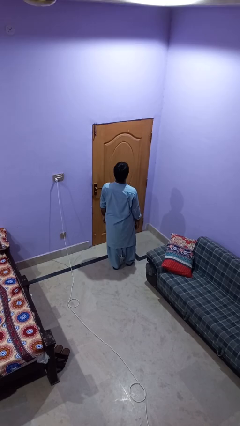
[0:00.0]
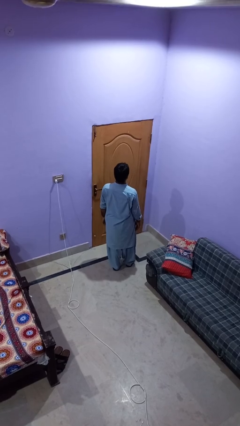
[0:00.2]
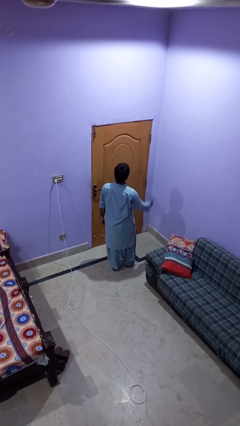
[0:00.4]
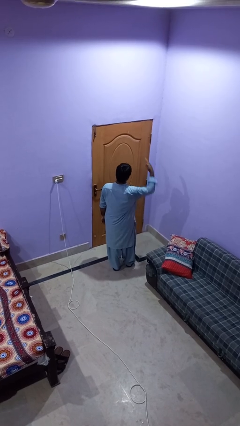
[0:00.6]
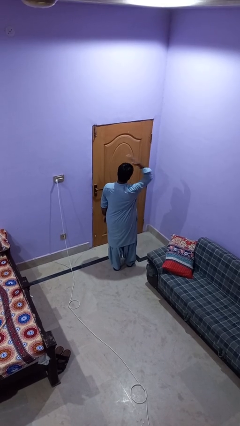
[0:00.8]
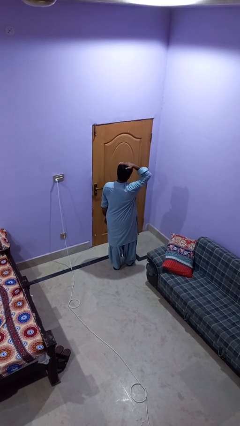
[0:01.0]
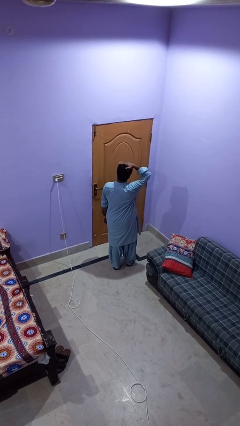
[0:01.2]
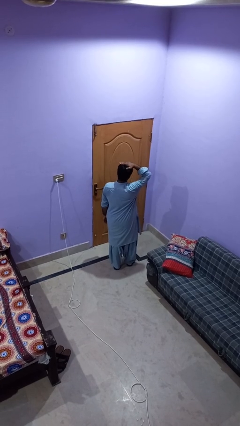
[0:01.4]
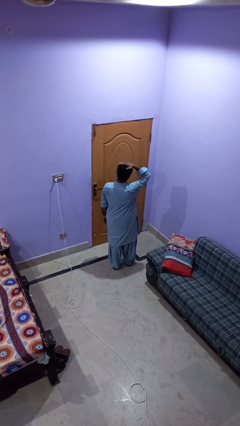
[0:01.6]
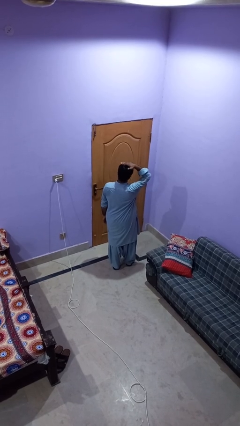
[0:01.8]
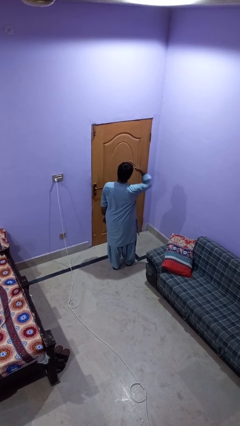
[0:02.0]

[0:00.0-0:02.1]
person pats head

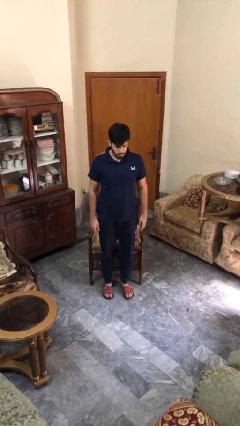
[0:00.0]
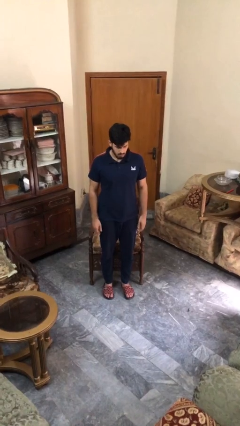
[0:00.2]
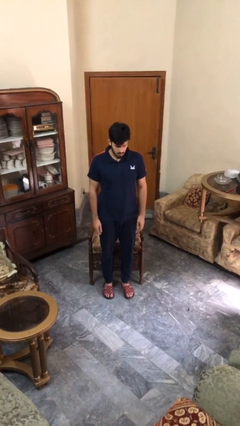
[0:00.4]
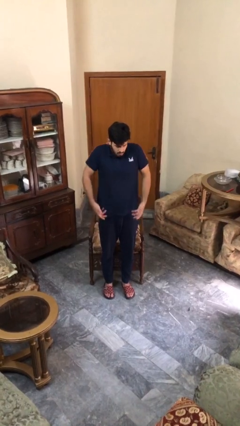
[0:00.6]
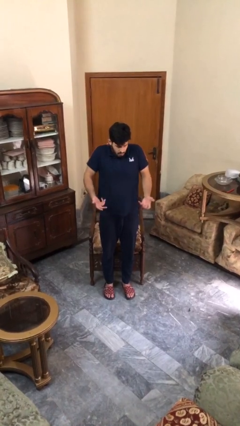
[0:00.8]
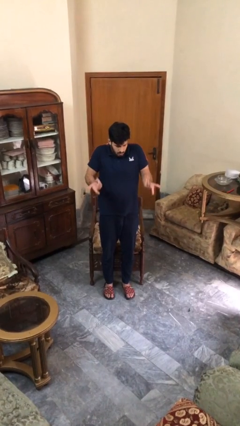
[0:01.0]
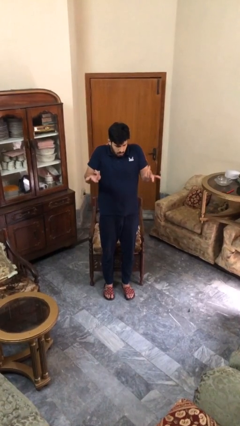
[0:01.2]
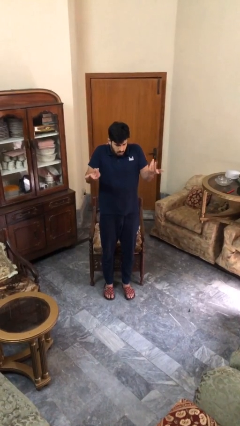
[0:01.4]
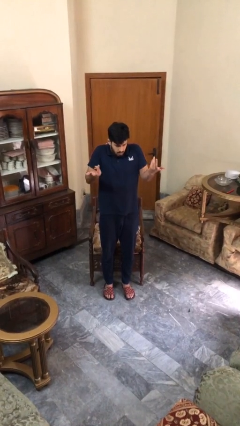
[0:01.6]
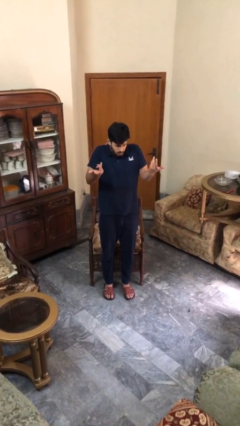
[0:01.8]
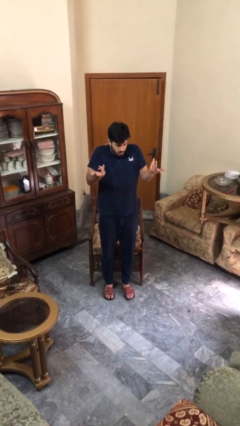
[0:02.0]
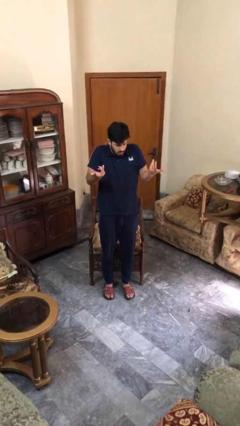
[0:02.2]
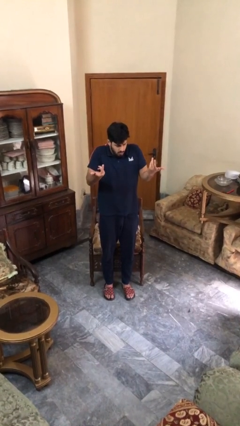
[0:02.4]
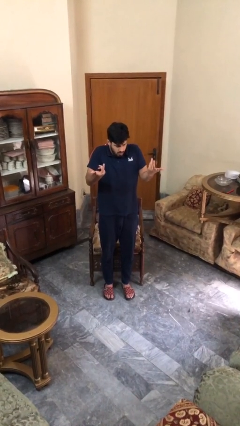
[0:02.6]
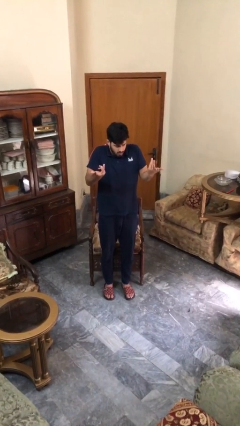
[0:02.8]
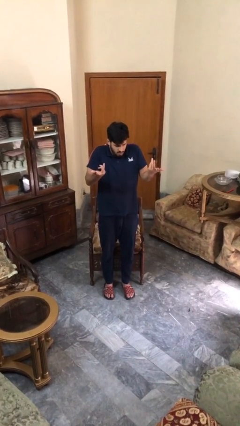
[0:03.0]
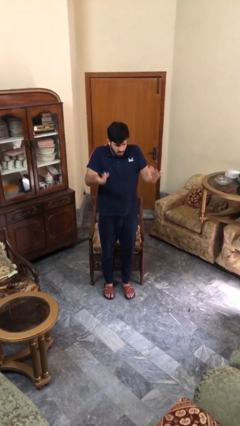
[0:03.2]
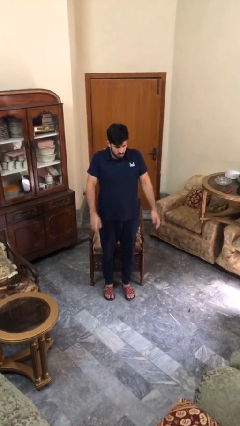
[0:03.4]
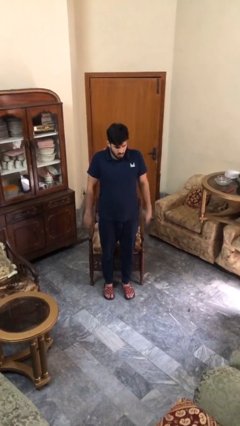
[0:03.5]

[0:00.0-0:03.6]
person shrugs

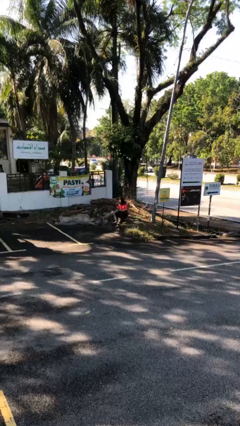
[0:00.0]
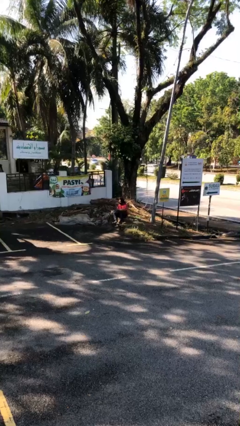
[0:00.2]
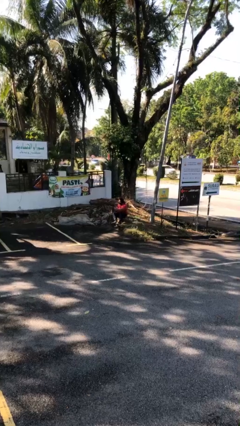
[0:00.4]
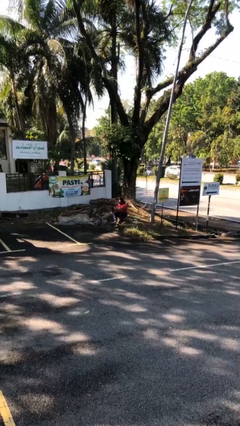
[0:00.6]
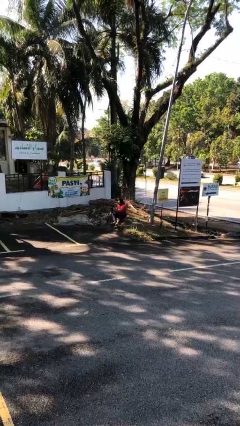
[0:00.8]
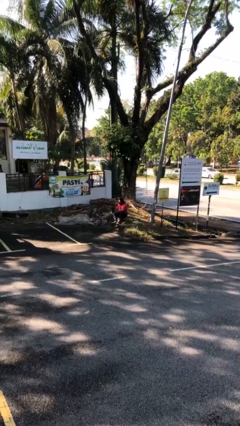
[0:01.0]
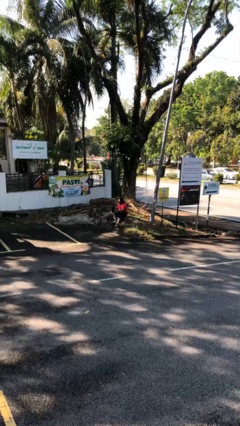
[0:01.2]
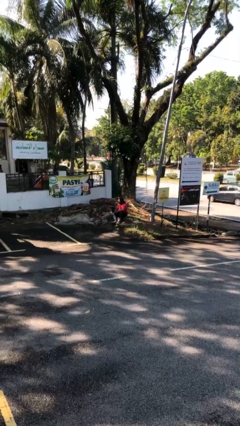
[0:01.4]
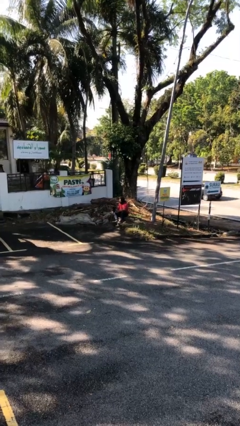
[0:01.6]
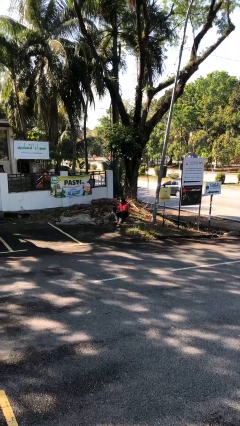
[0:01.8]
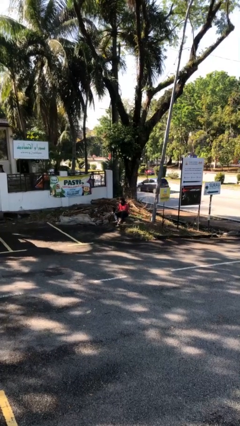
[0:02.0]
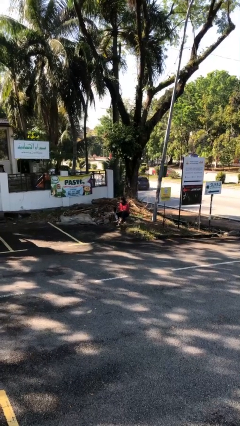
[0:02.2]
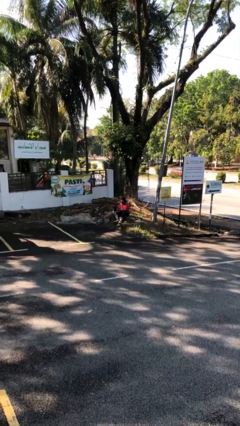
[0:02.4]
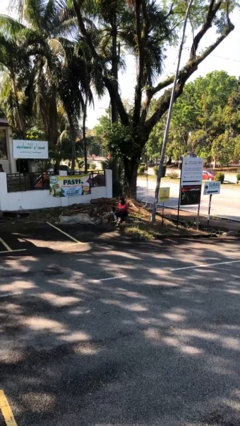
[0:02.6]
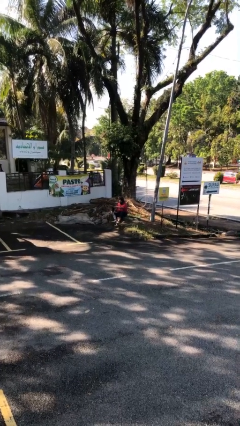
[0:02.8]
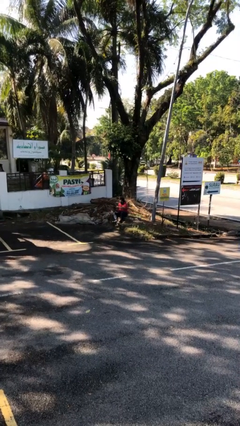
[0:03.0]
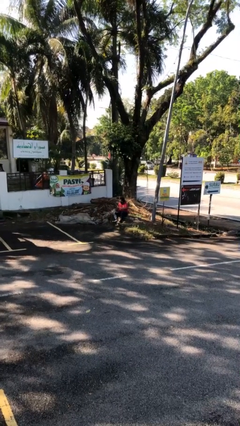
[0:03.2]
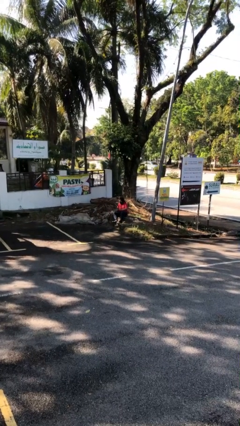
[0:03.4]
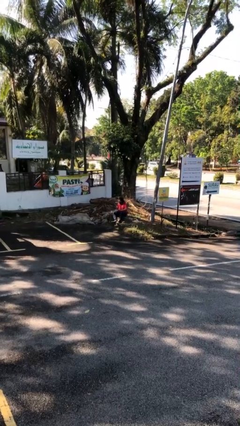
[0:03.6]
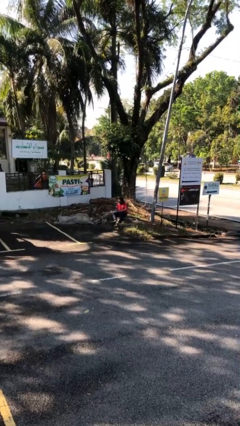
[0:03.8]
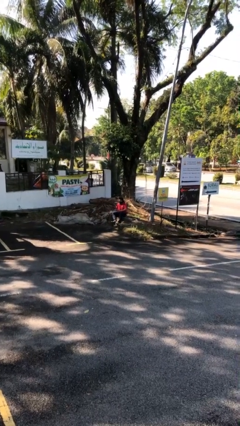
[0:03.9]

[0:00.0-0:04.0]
person interacts with laptop

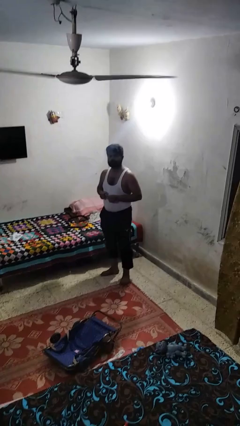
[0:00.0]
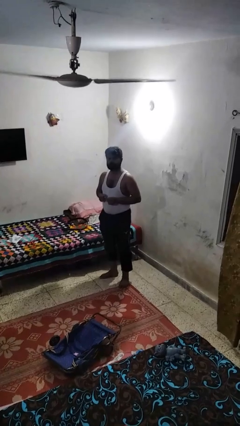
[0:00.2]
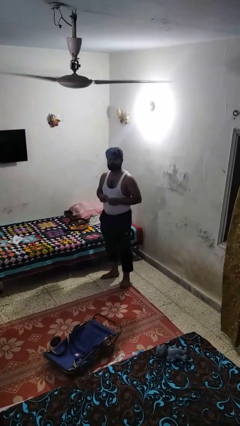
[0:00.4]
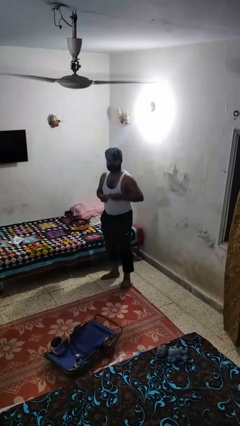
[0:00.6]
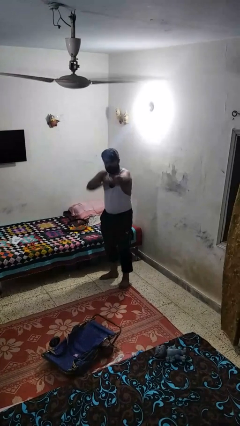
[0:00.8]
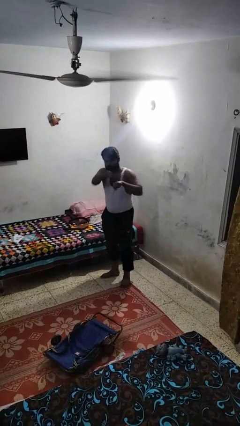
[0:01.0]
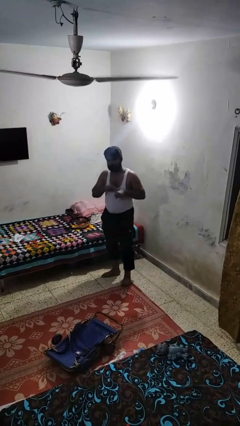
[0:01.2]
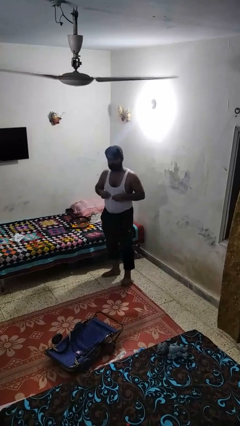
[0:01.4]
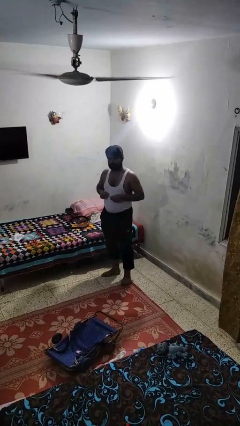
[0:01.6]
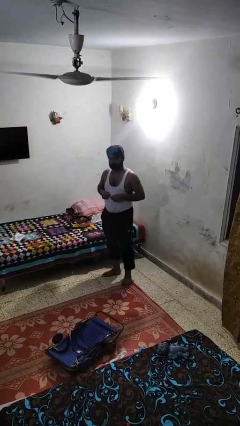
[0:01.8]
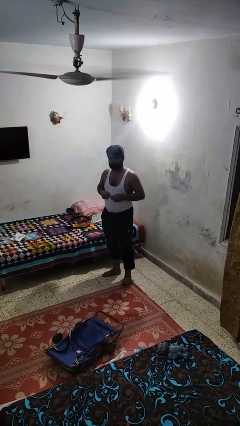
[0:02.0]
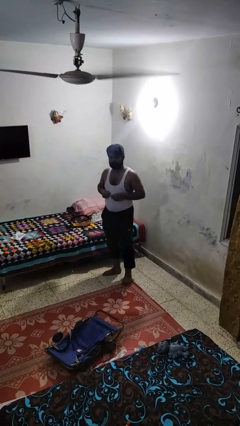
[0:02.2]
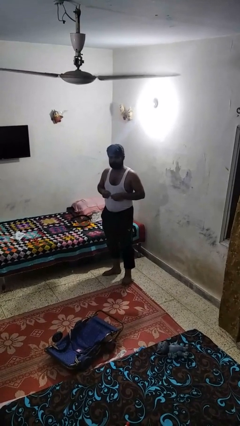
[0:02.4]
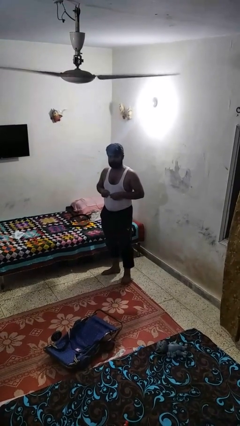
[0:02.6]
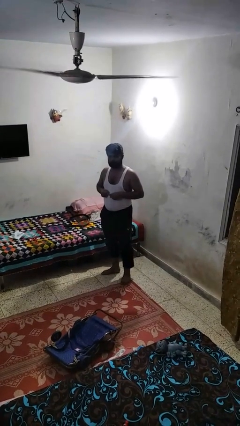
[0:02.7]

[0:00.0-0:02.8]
person karate chop

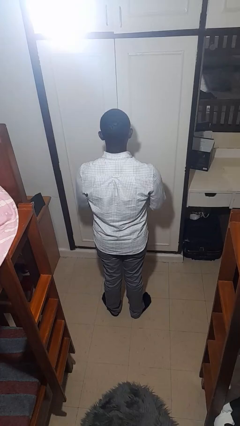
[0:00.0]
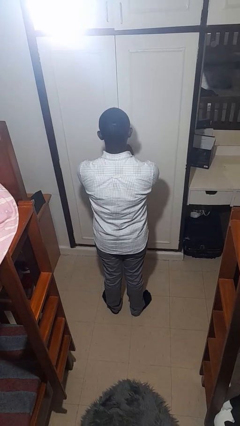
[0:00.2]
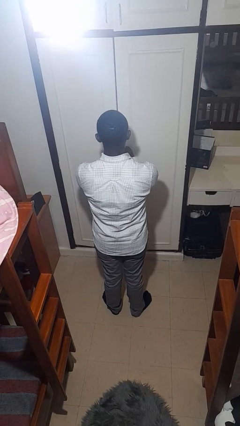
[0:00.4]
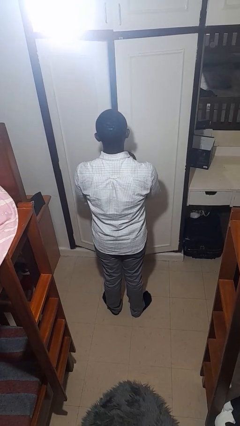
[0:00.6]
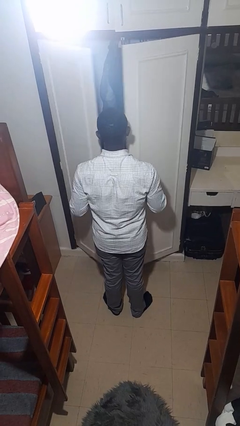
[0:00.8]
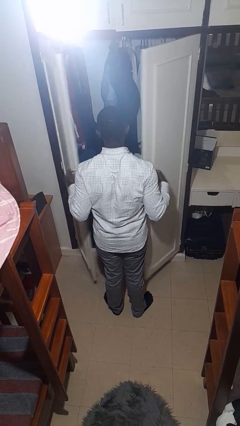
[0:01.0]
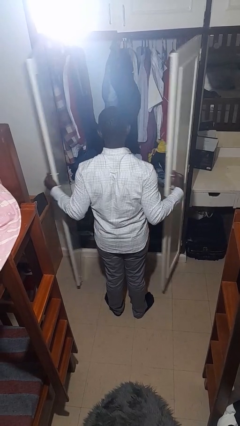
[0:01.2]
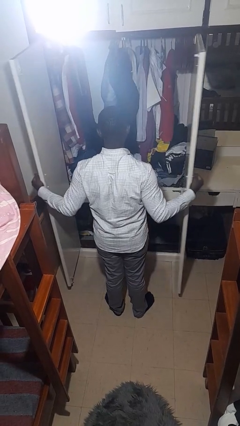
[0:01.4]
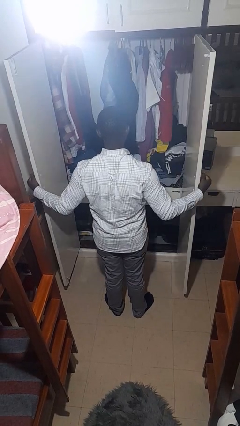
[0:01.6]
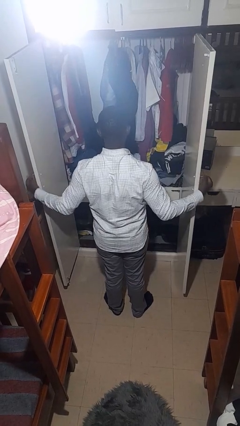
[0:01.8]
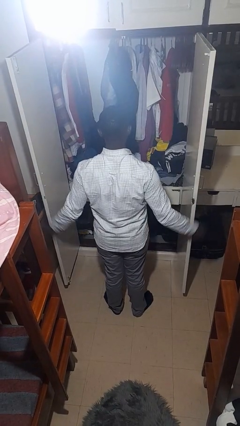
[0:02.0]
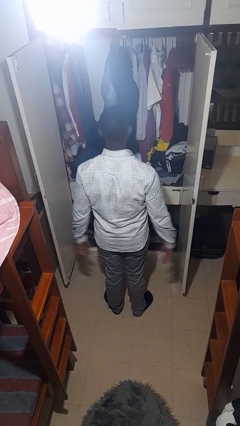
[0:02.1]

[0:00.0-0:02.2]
person opens closet door

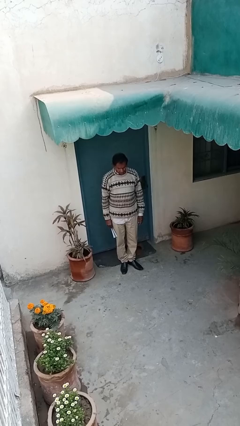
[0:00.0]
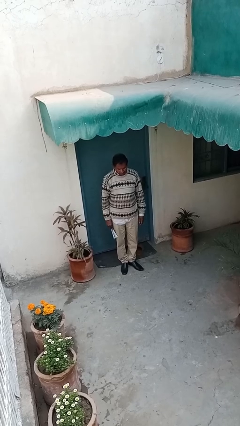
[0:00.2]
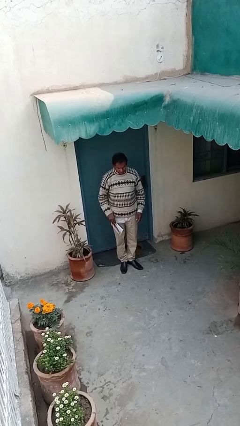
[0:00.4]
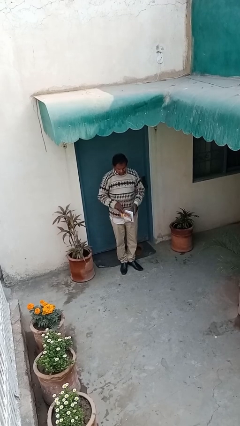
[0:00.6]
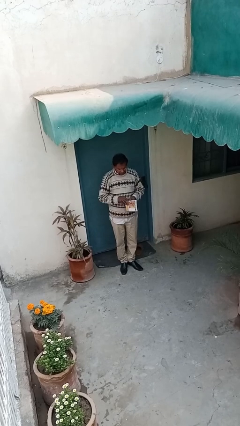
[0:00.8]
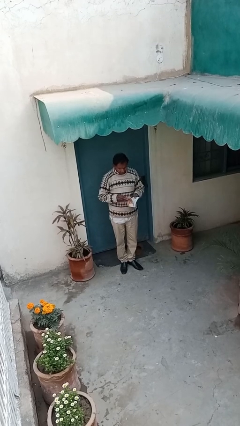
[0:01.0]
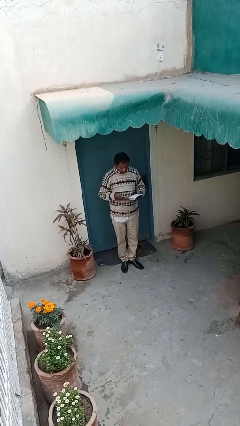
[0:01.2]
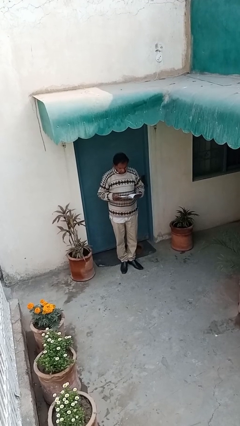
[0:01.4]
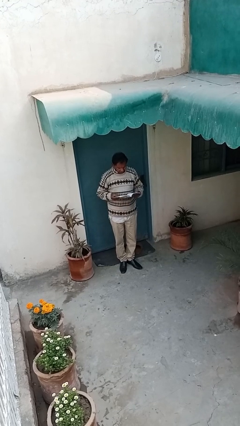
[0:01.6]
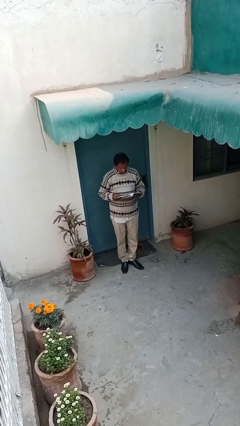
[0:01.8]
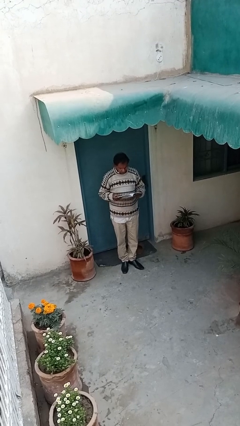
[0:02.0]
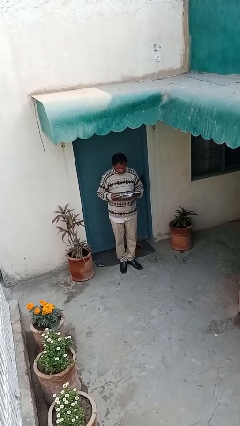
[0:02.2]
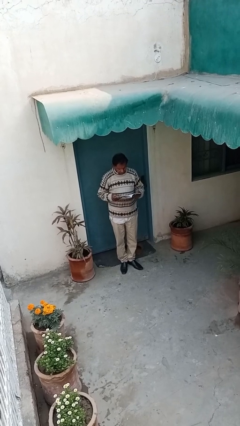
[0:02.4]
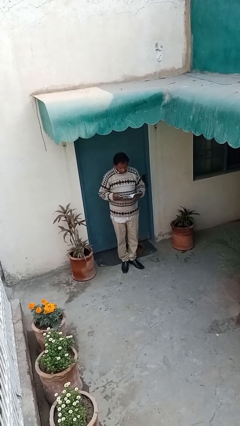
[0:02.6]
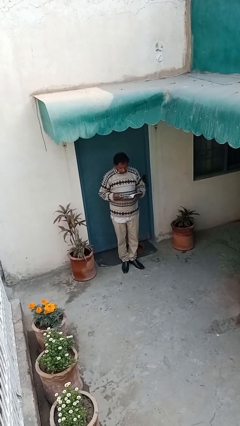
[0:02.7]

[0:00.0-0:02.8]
person reads document

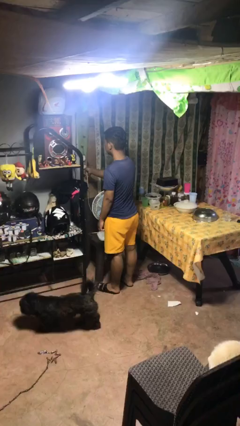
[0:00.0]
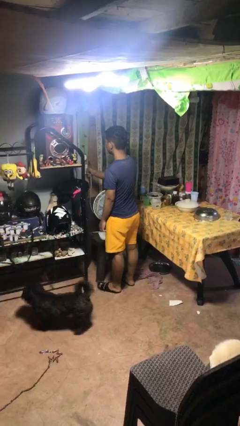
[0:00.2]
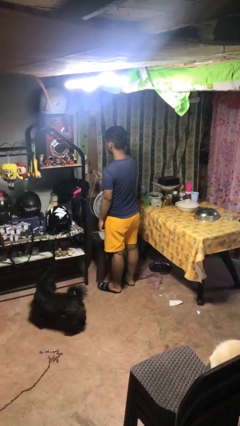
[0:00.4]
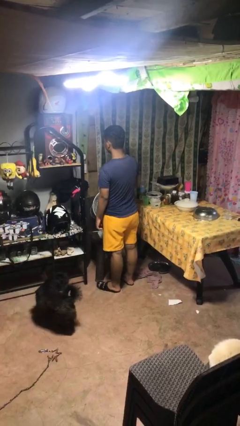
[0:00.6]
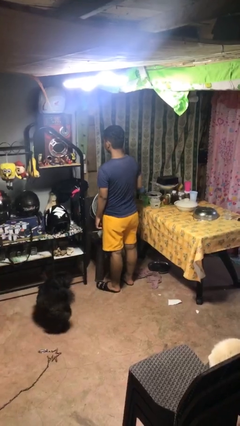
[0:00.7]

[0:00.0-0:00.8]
person unplugs from electrical socket
